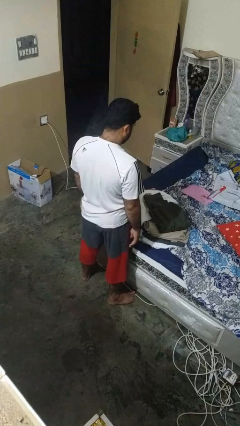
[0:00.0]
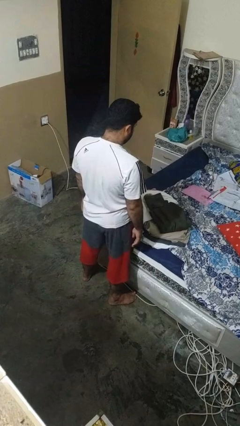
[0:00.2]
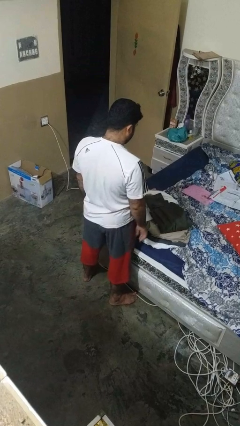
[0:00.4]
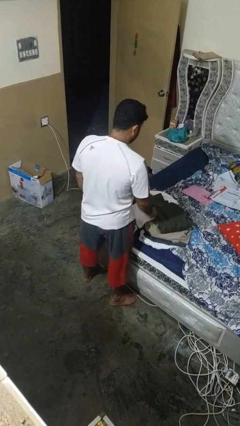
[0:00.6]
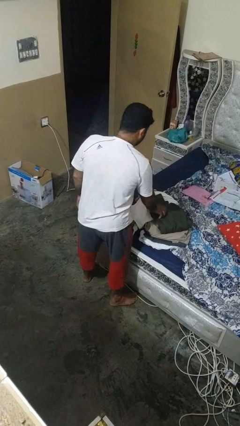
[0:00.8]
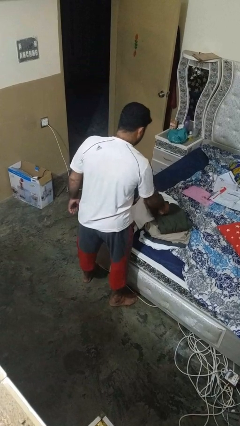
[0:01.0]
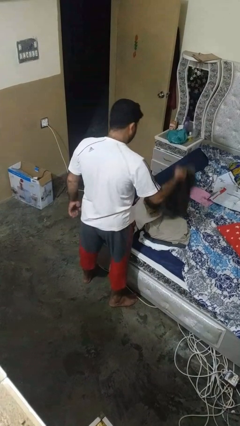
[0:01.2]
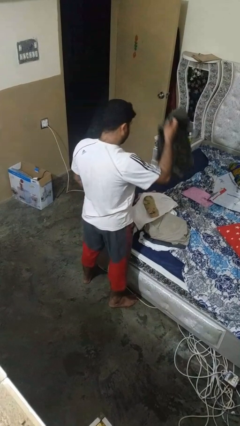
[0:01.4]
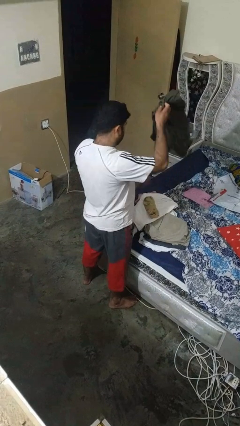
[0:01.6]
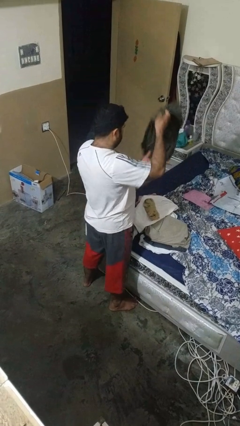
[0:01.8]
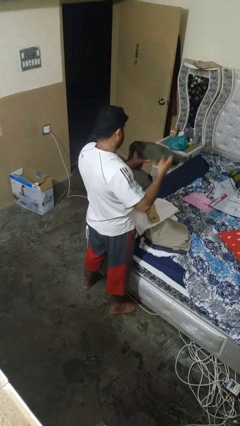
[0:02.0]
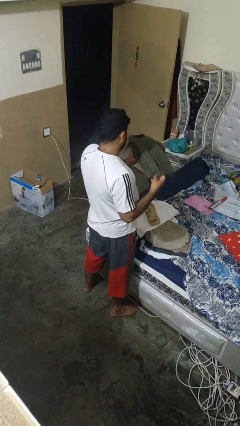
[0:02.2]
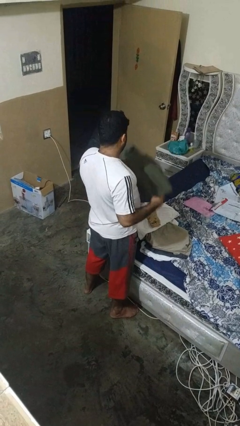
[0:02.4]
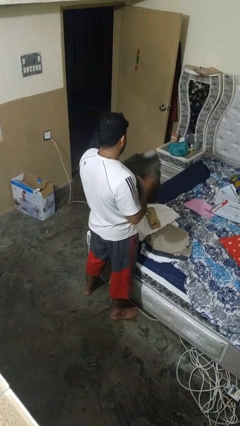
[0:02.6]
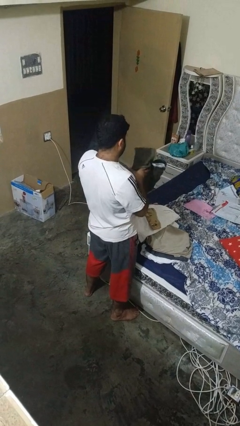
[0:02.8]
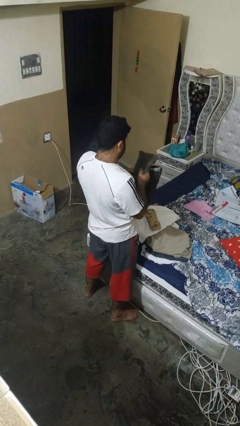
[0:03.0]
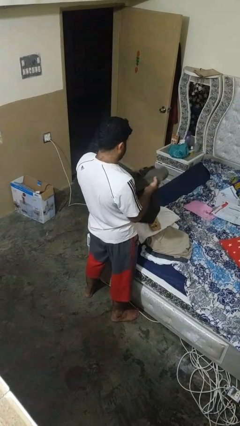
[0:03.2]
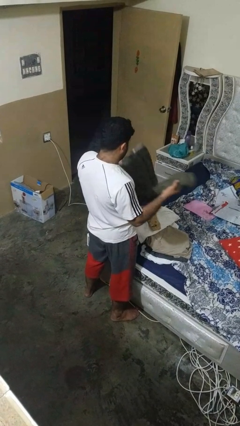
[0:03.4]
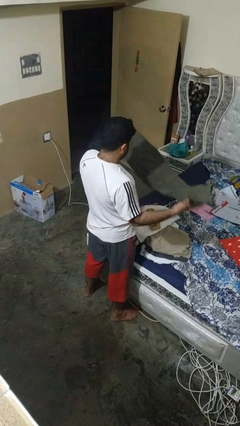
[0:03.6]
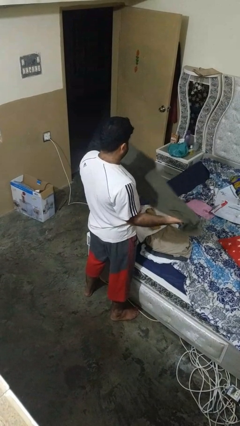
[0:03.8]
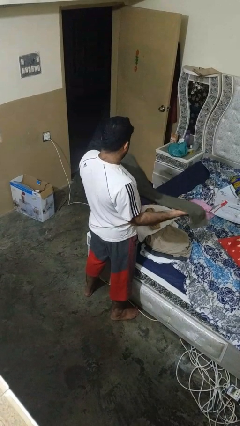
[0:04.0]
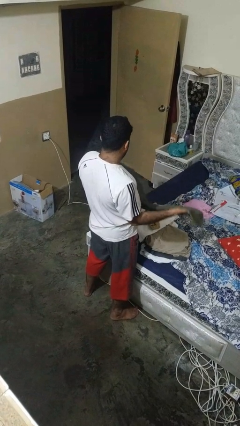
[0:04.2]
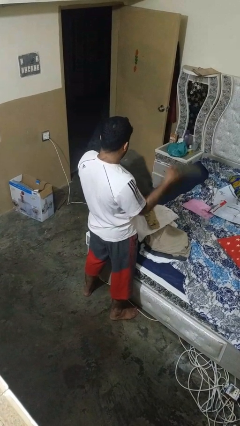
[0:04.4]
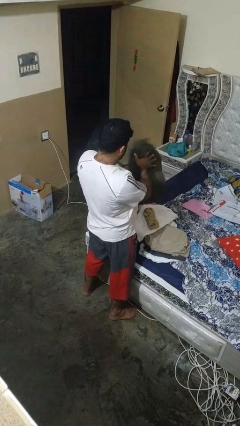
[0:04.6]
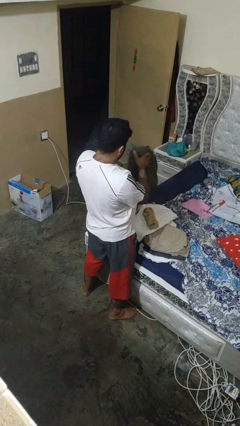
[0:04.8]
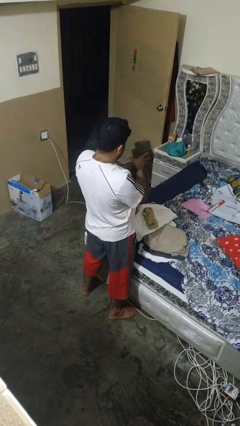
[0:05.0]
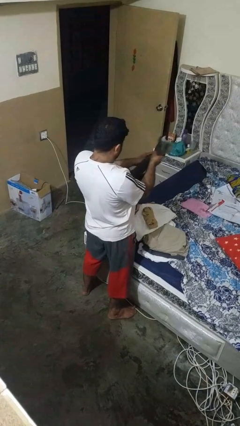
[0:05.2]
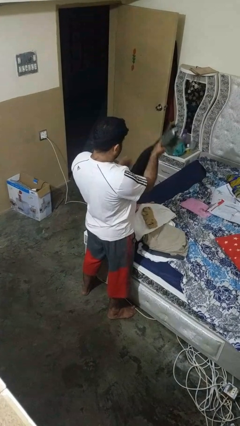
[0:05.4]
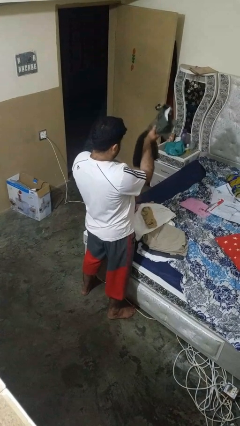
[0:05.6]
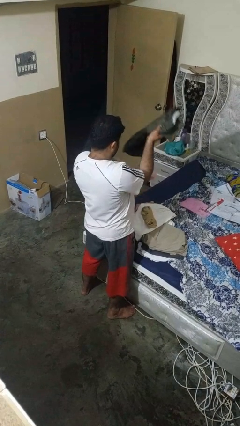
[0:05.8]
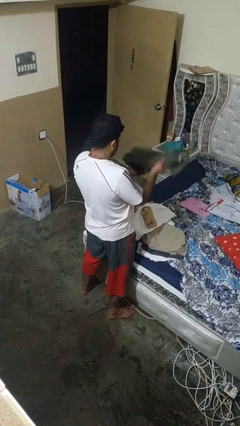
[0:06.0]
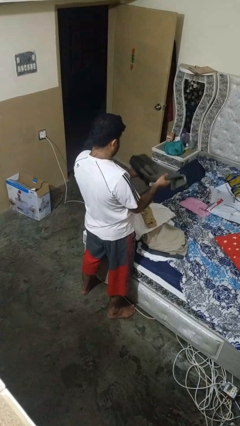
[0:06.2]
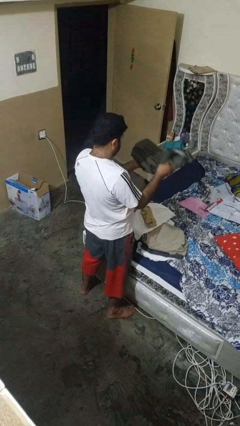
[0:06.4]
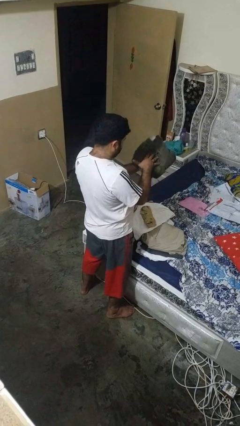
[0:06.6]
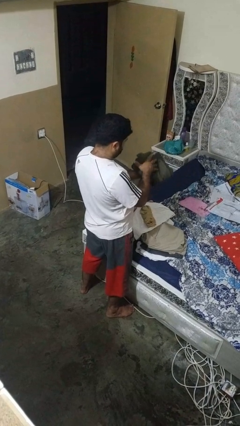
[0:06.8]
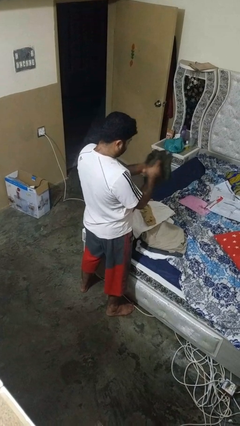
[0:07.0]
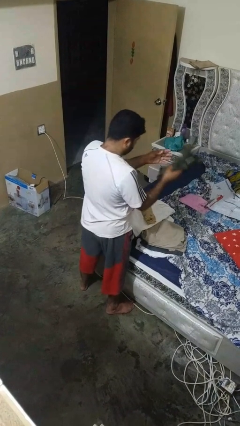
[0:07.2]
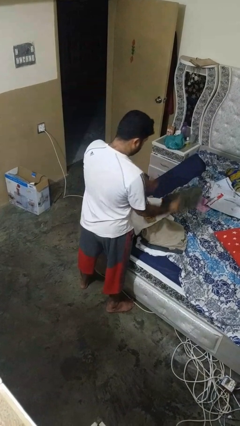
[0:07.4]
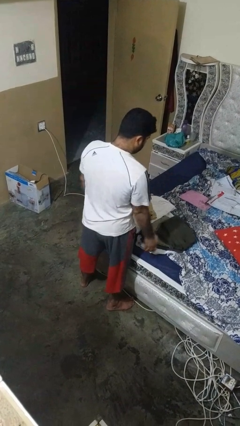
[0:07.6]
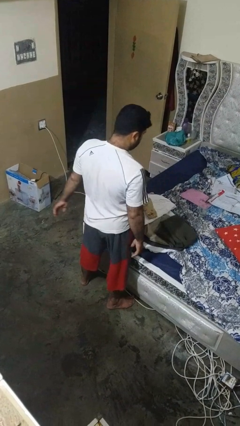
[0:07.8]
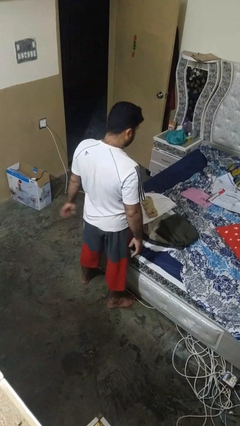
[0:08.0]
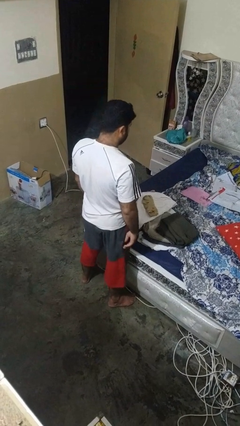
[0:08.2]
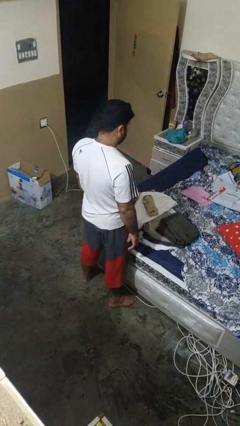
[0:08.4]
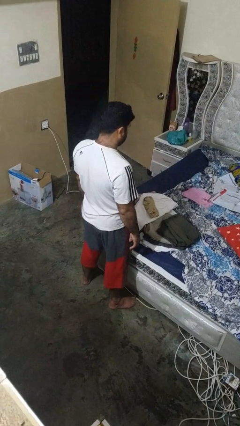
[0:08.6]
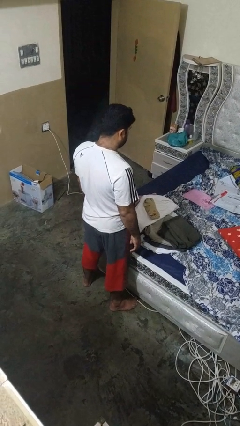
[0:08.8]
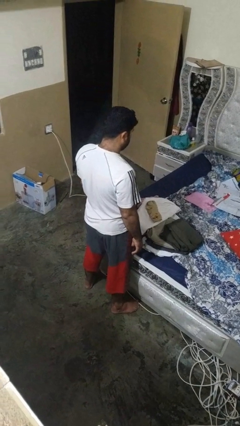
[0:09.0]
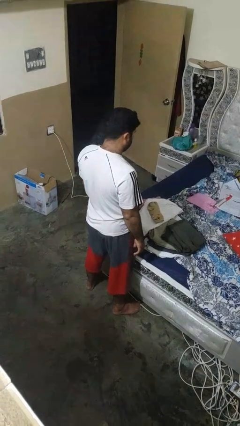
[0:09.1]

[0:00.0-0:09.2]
person folds pants

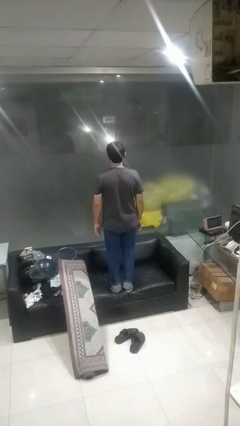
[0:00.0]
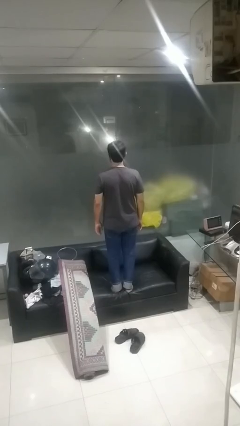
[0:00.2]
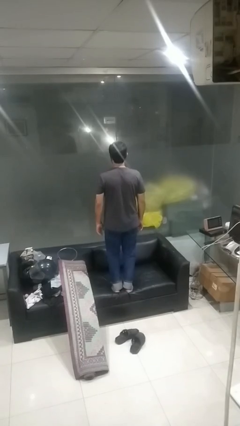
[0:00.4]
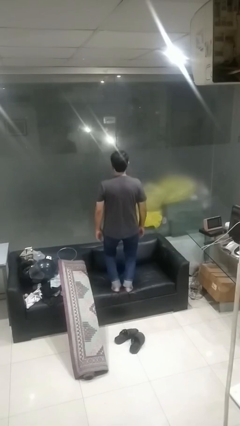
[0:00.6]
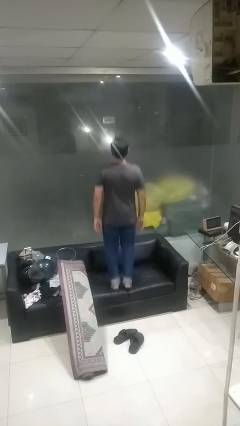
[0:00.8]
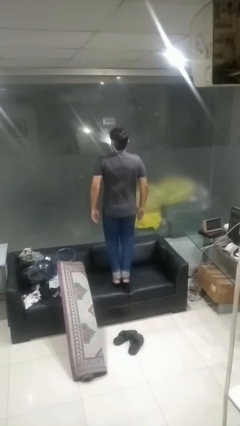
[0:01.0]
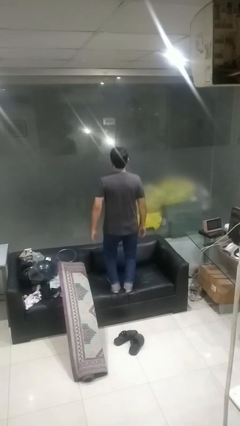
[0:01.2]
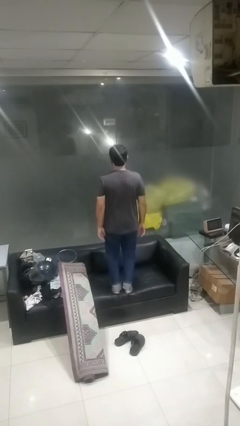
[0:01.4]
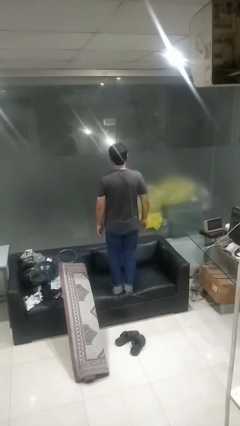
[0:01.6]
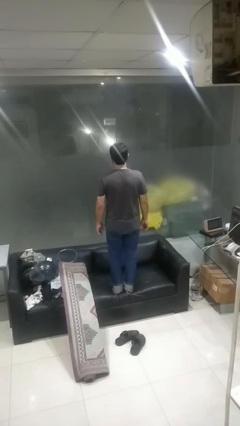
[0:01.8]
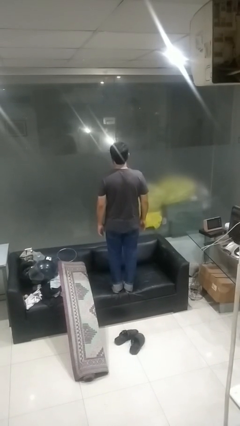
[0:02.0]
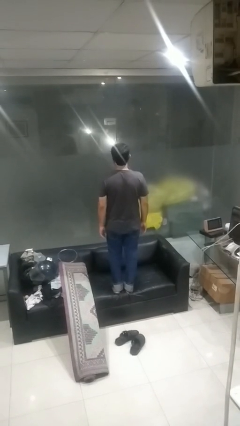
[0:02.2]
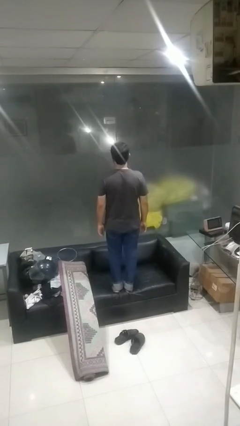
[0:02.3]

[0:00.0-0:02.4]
person jumps on couch

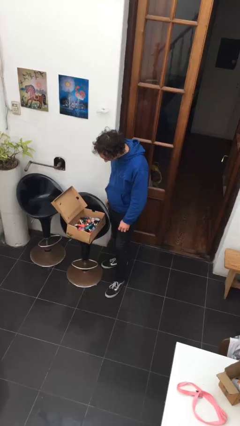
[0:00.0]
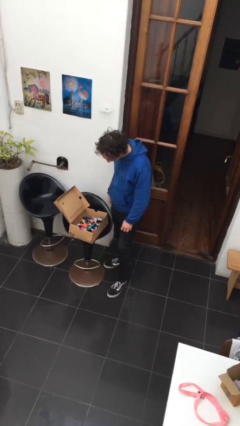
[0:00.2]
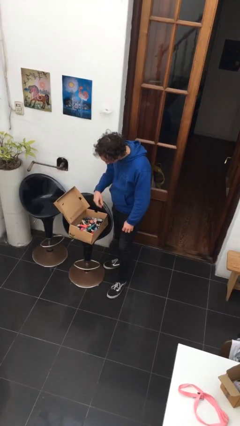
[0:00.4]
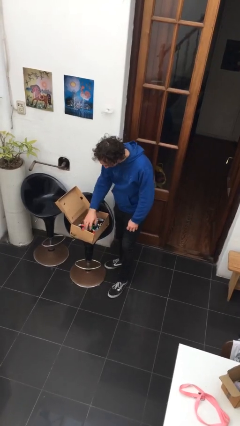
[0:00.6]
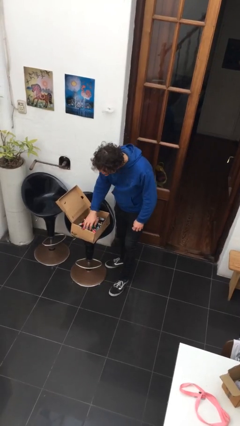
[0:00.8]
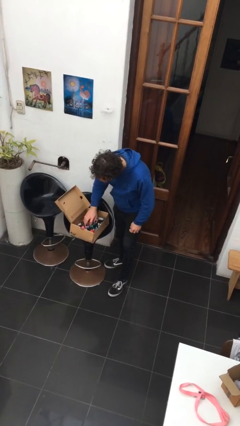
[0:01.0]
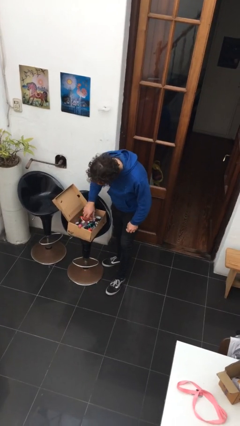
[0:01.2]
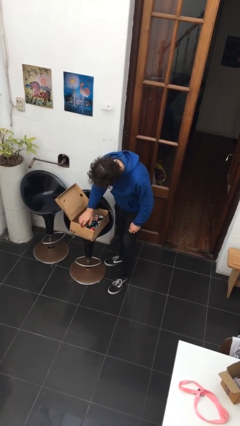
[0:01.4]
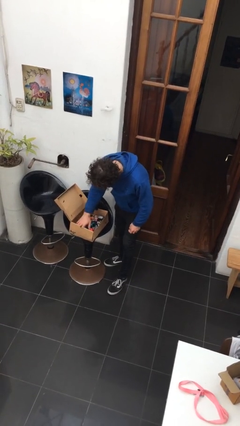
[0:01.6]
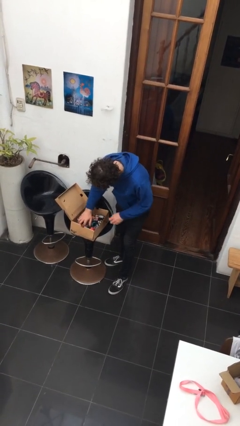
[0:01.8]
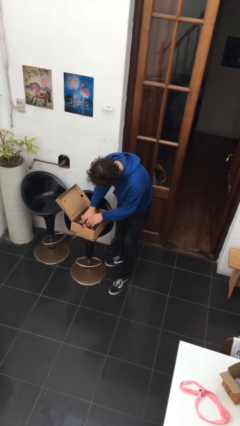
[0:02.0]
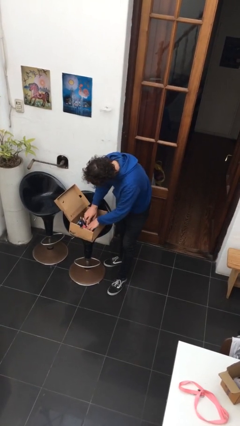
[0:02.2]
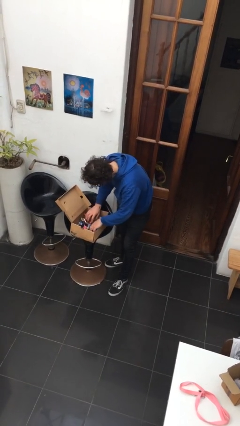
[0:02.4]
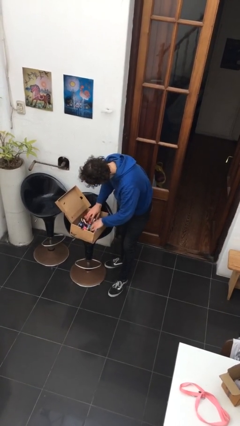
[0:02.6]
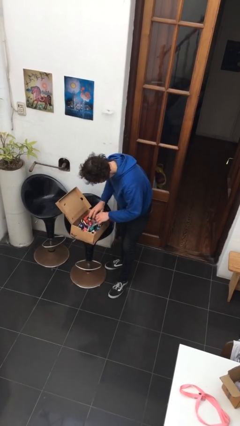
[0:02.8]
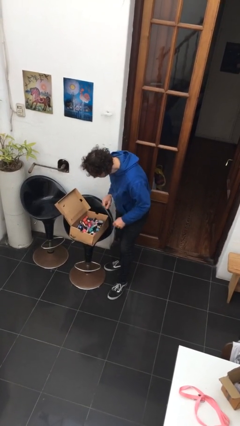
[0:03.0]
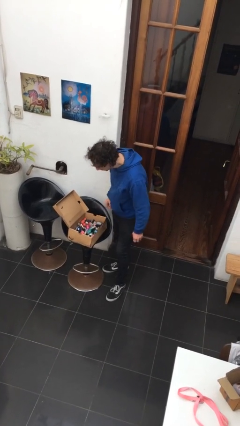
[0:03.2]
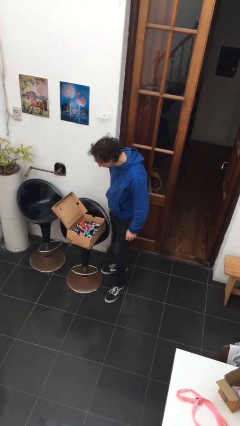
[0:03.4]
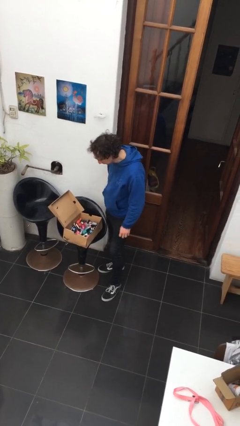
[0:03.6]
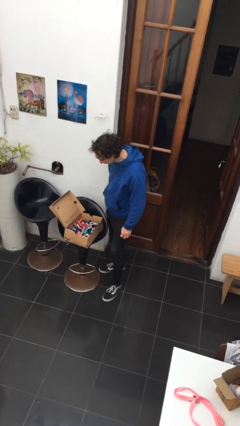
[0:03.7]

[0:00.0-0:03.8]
person searches in box

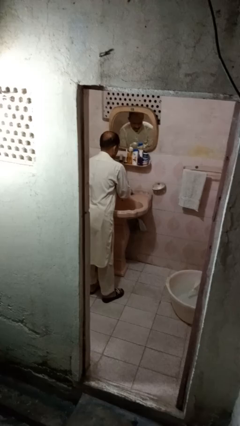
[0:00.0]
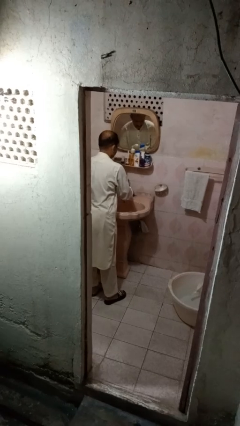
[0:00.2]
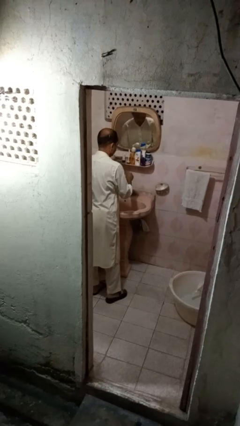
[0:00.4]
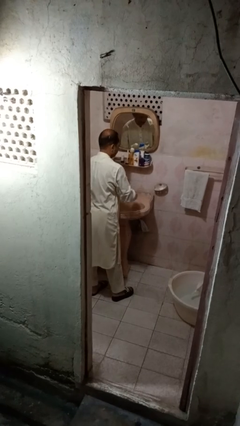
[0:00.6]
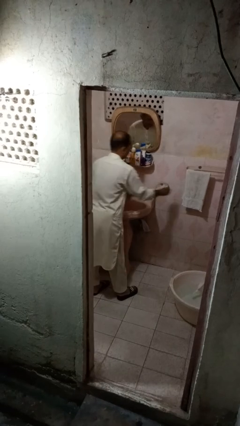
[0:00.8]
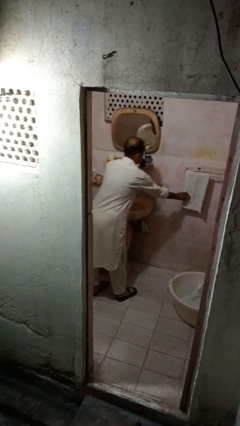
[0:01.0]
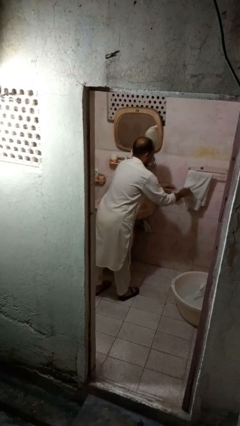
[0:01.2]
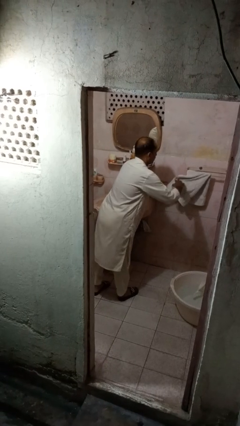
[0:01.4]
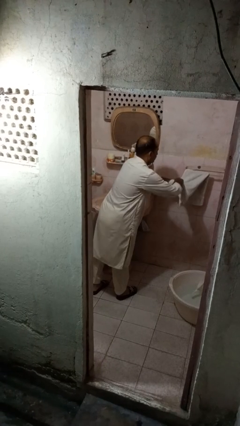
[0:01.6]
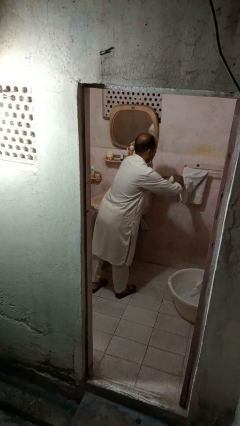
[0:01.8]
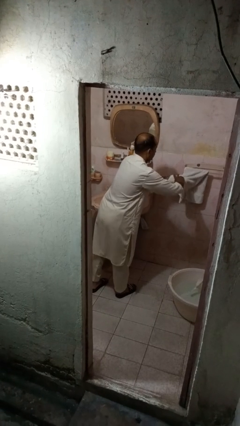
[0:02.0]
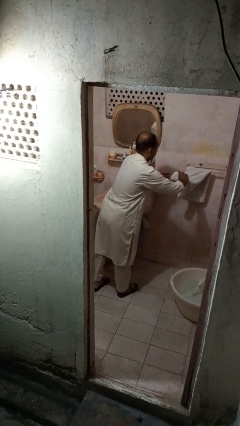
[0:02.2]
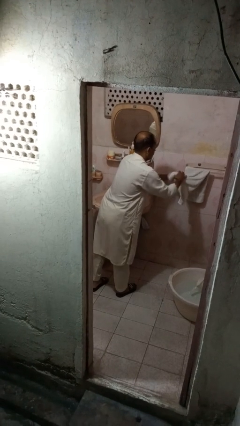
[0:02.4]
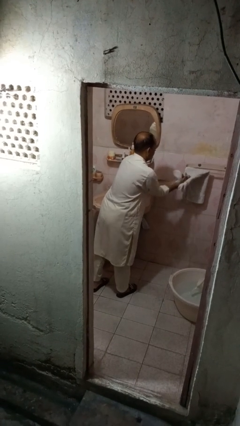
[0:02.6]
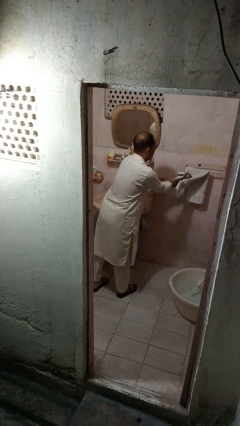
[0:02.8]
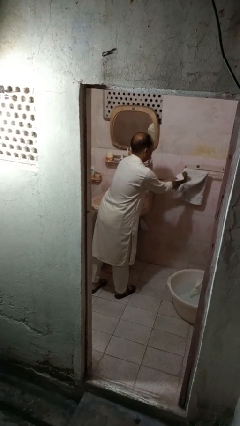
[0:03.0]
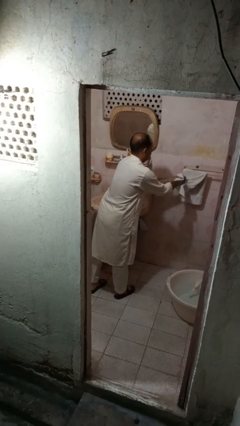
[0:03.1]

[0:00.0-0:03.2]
person dries hands with towel
